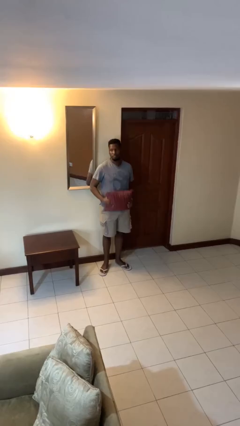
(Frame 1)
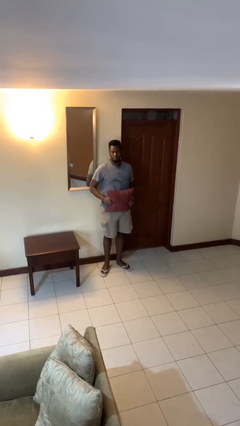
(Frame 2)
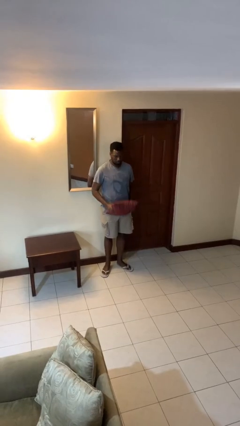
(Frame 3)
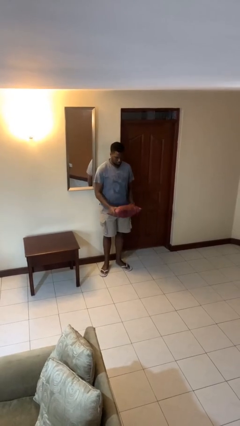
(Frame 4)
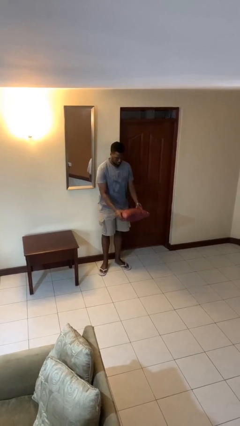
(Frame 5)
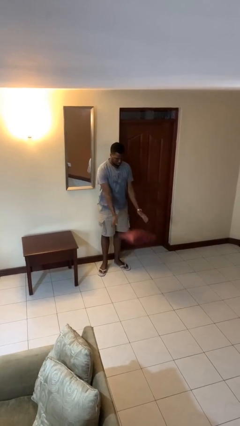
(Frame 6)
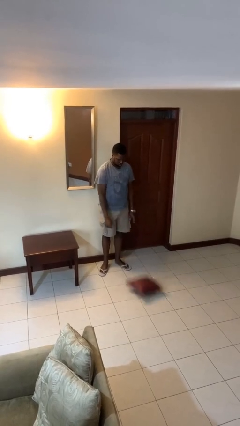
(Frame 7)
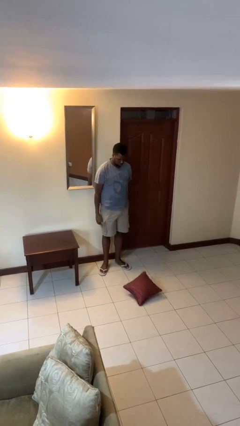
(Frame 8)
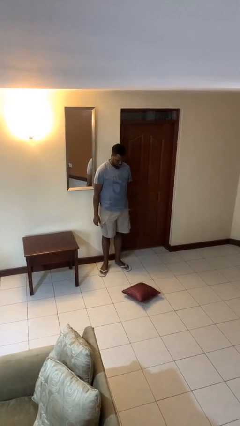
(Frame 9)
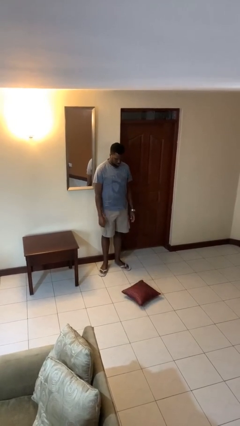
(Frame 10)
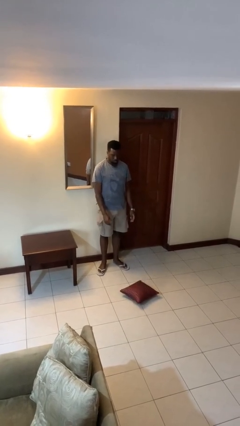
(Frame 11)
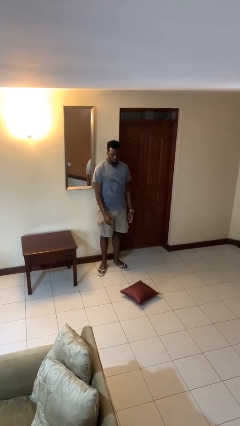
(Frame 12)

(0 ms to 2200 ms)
person throws object to ground

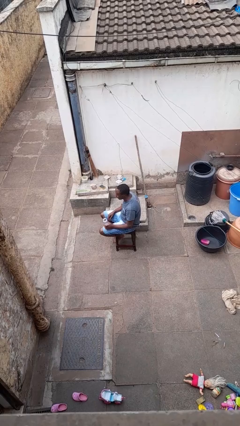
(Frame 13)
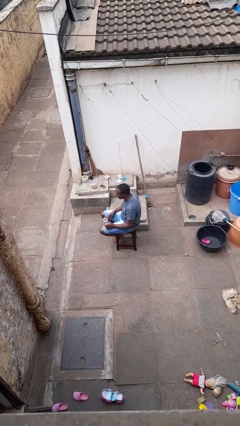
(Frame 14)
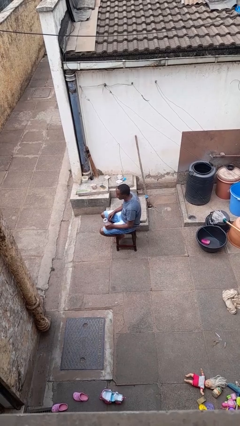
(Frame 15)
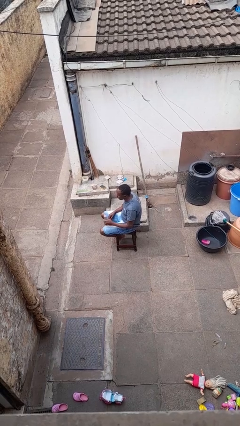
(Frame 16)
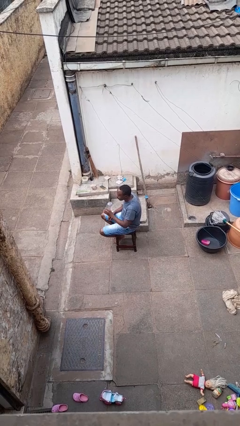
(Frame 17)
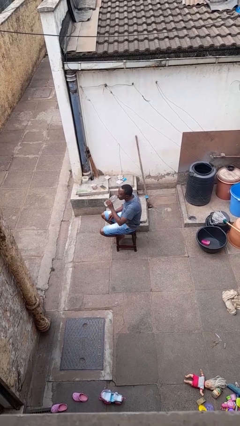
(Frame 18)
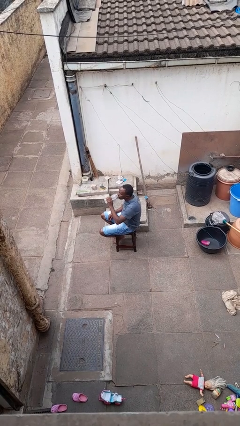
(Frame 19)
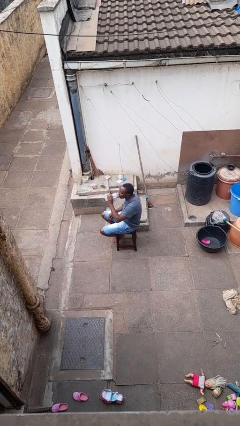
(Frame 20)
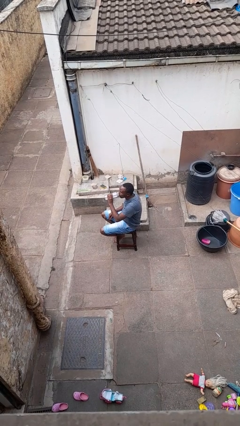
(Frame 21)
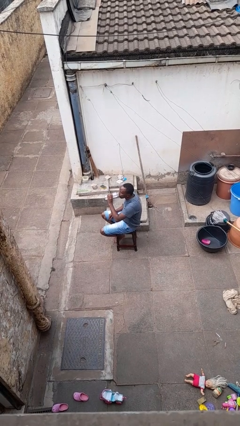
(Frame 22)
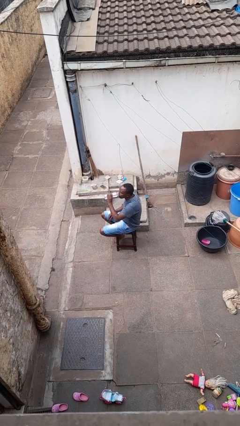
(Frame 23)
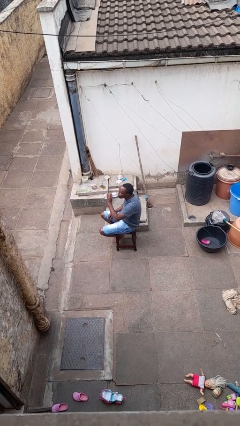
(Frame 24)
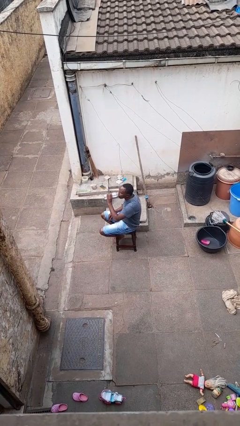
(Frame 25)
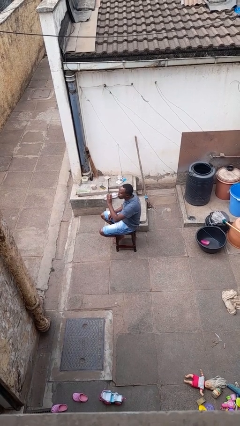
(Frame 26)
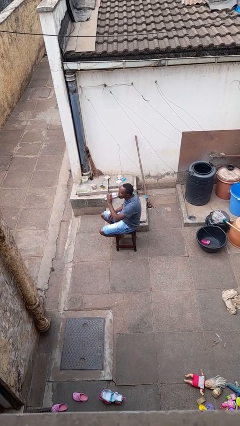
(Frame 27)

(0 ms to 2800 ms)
person drinks from bottle

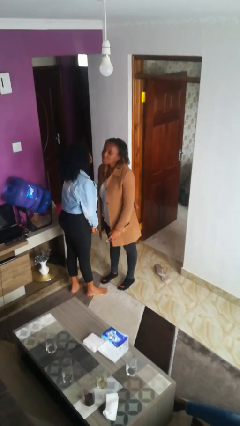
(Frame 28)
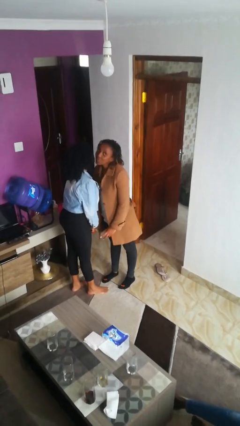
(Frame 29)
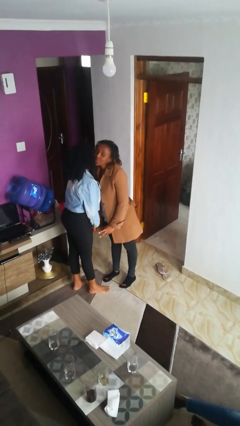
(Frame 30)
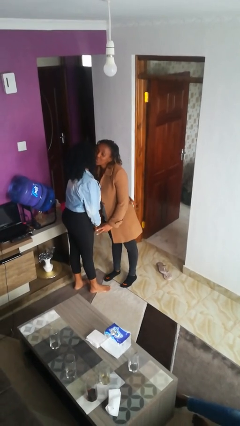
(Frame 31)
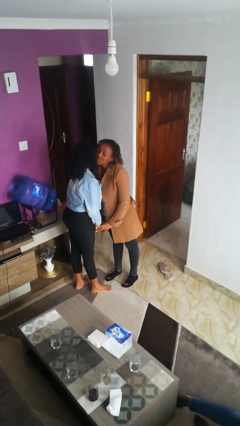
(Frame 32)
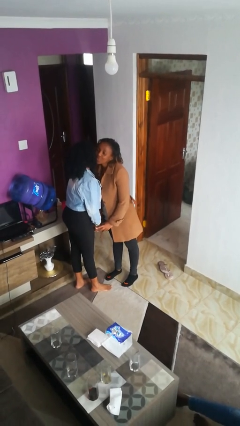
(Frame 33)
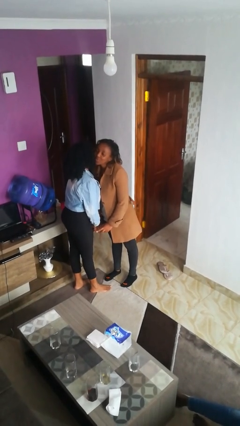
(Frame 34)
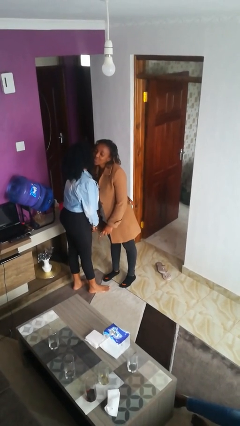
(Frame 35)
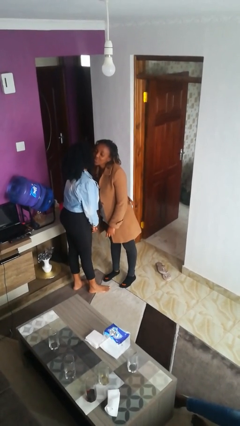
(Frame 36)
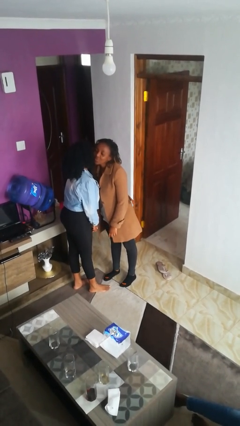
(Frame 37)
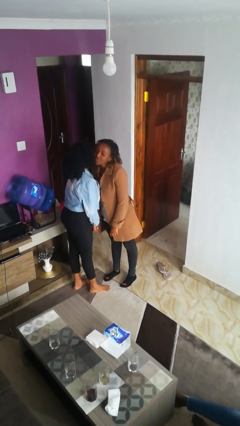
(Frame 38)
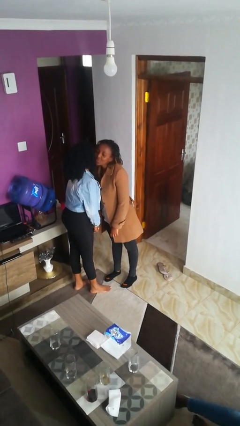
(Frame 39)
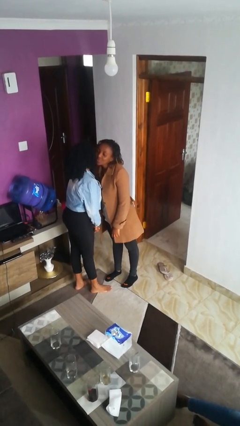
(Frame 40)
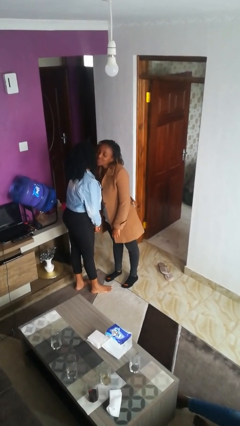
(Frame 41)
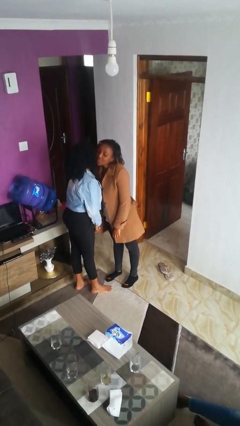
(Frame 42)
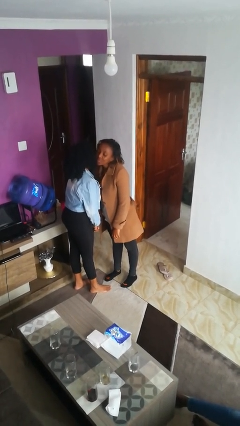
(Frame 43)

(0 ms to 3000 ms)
person kisses cheek of person

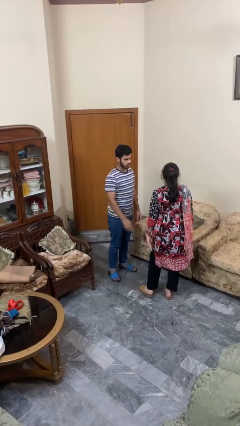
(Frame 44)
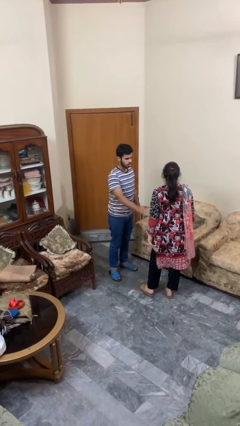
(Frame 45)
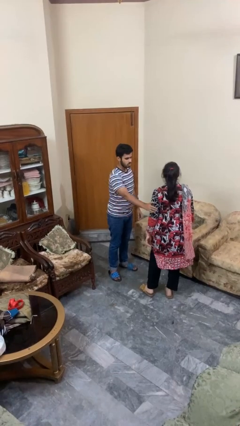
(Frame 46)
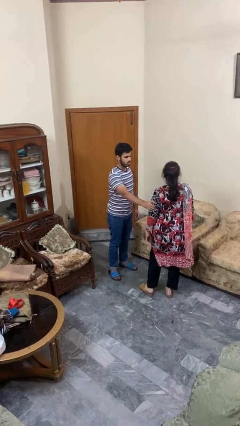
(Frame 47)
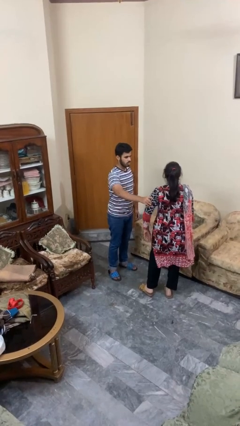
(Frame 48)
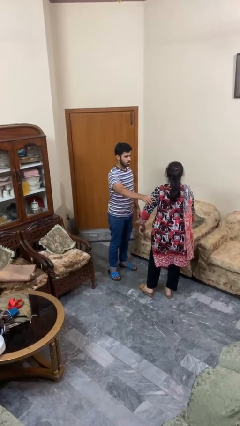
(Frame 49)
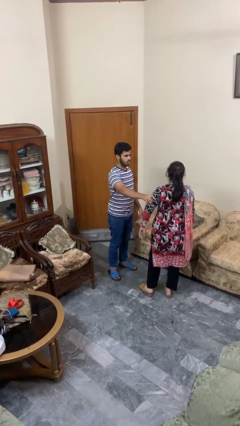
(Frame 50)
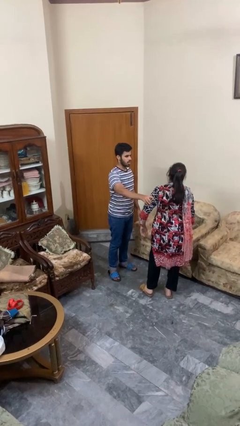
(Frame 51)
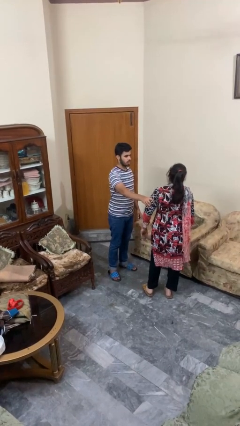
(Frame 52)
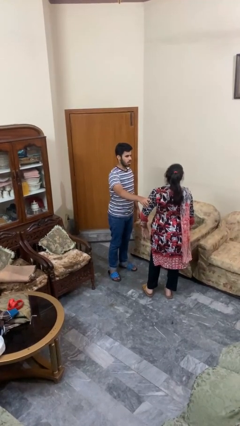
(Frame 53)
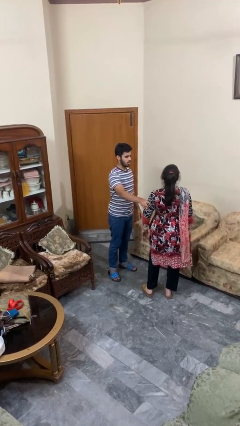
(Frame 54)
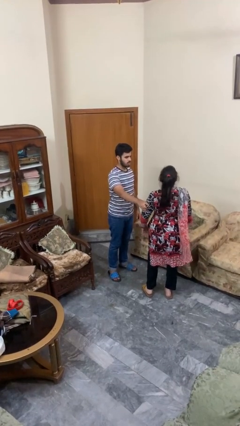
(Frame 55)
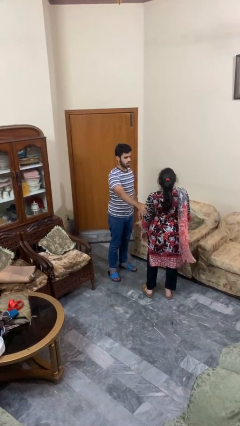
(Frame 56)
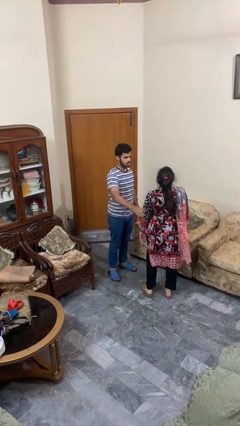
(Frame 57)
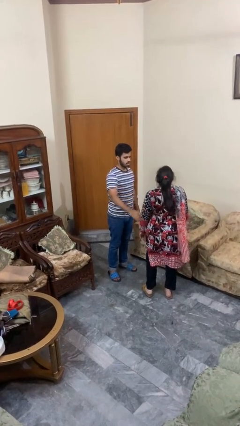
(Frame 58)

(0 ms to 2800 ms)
person grabs person by bicep

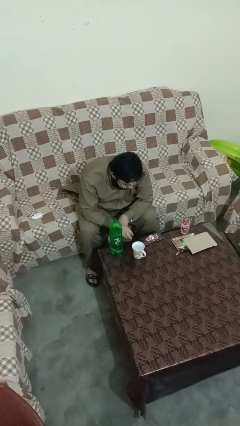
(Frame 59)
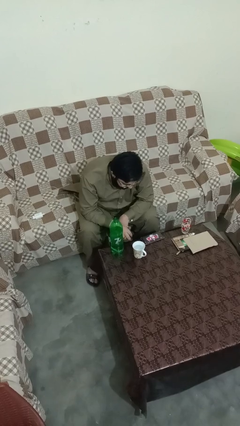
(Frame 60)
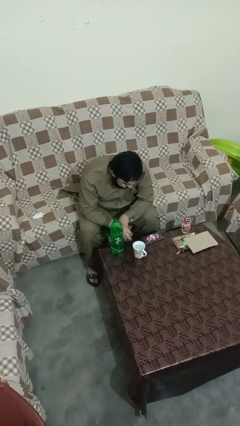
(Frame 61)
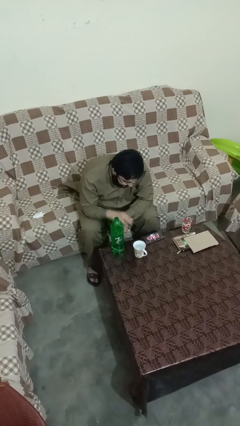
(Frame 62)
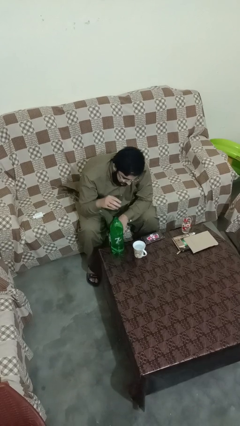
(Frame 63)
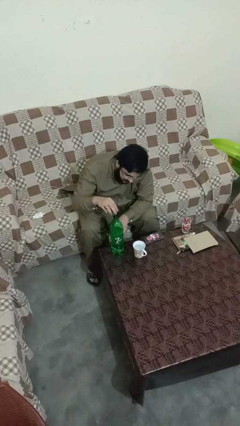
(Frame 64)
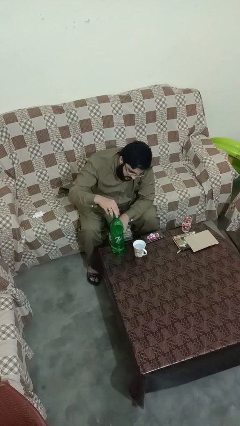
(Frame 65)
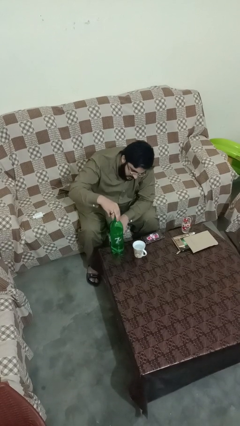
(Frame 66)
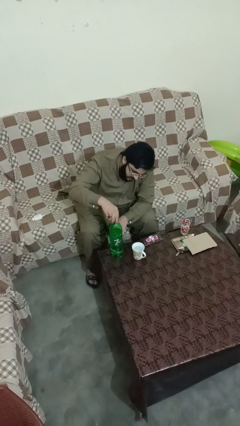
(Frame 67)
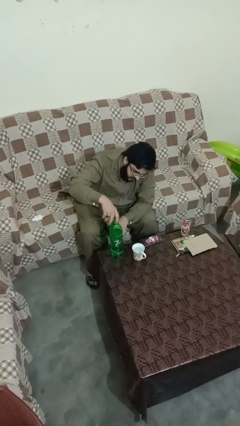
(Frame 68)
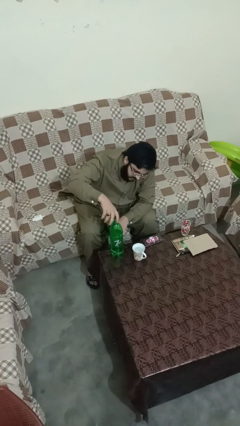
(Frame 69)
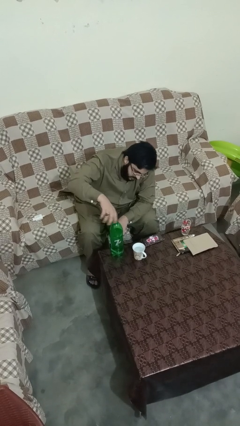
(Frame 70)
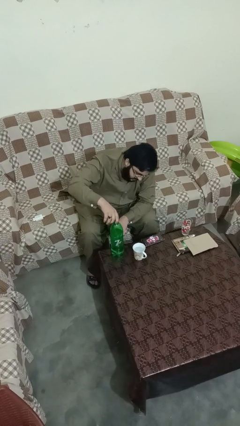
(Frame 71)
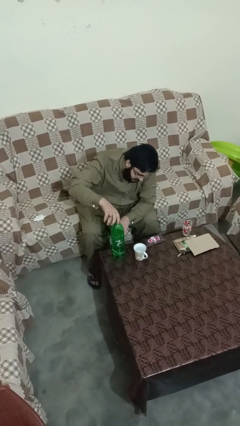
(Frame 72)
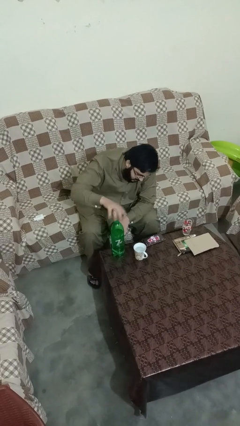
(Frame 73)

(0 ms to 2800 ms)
person screws lid to bottle

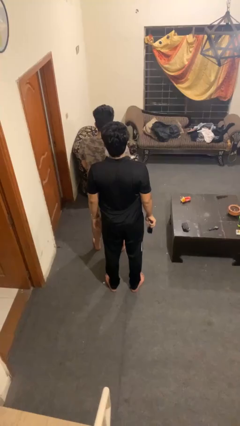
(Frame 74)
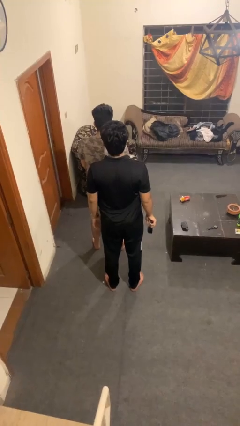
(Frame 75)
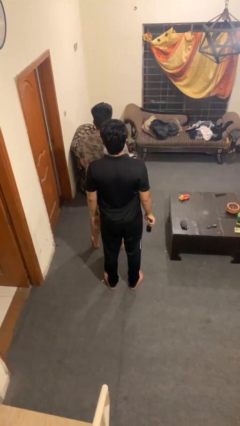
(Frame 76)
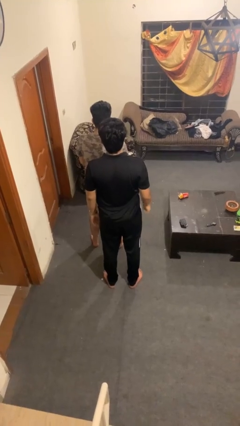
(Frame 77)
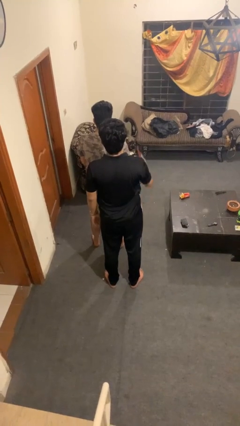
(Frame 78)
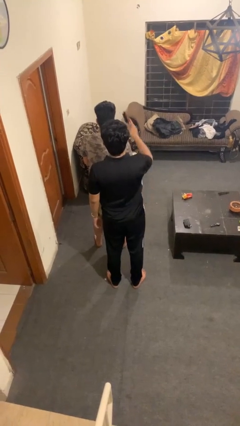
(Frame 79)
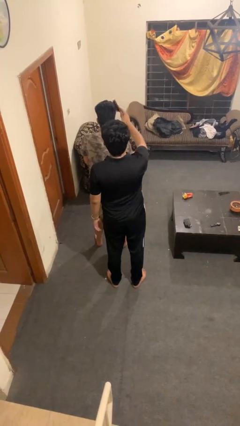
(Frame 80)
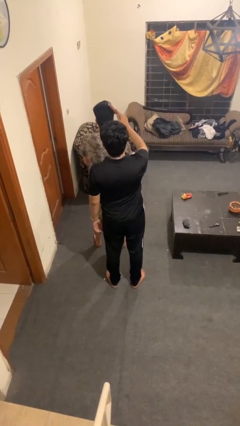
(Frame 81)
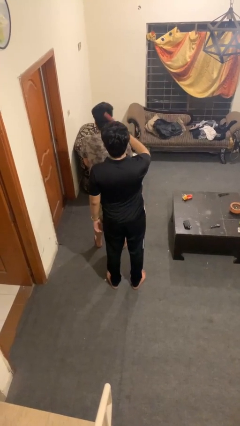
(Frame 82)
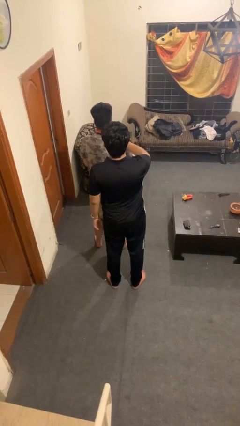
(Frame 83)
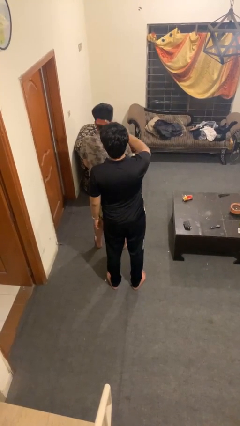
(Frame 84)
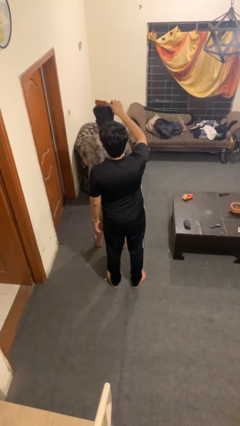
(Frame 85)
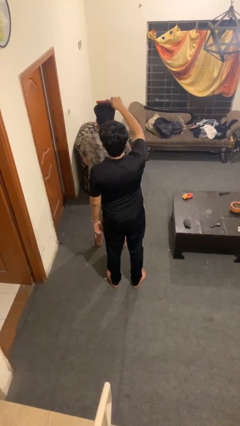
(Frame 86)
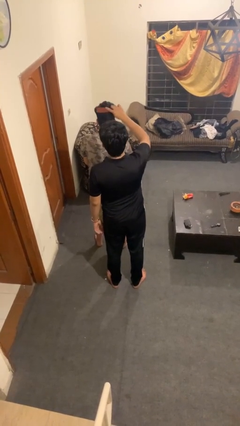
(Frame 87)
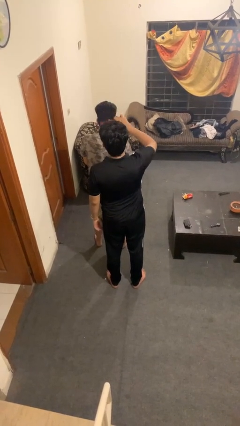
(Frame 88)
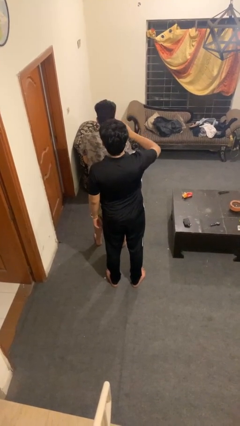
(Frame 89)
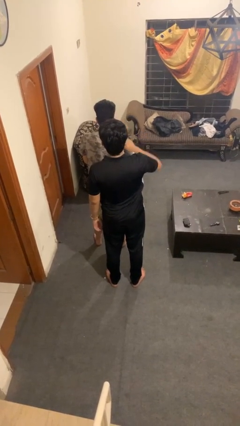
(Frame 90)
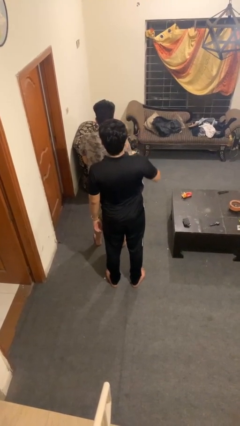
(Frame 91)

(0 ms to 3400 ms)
person brushes hair of person
